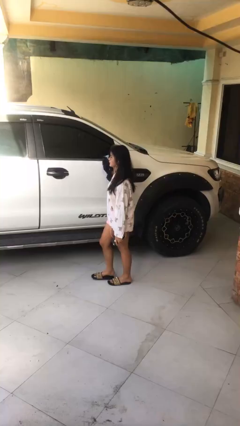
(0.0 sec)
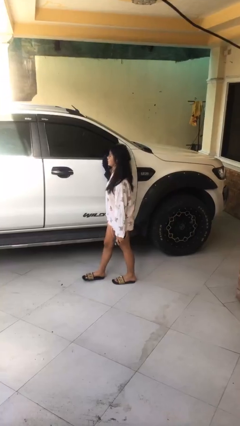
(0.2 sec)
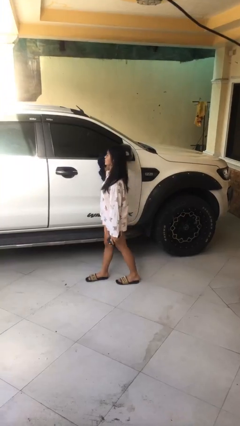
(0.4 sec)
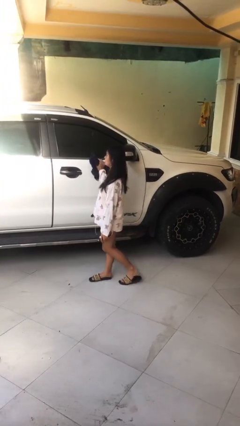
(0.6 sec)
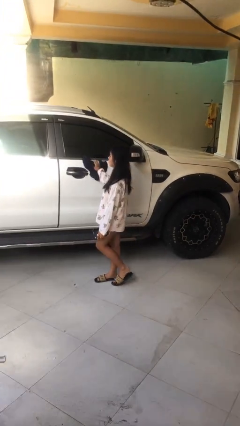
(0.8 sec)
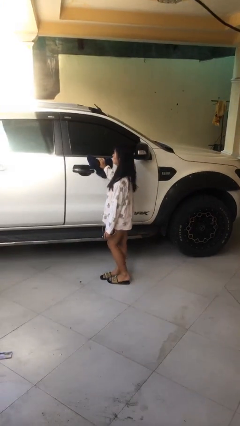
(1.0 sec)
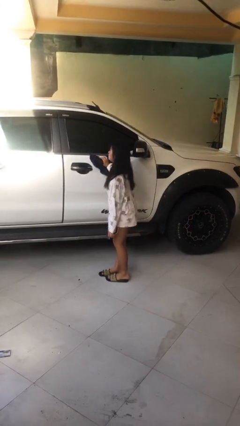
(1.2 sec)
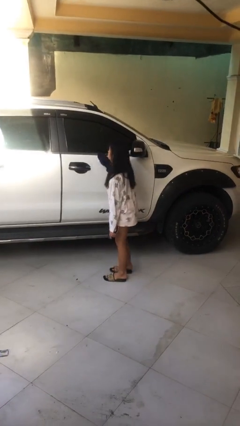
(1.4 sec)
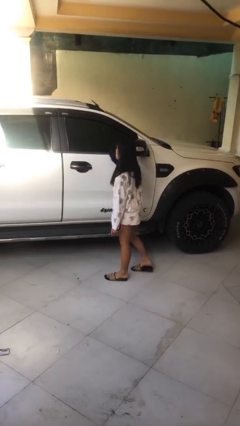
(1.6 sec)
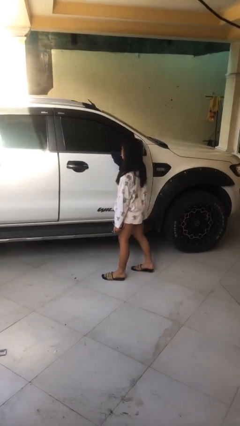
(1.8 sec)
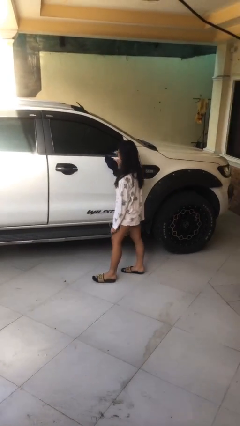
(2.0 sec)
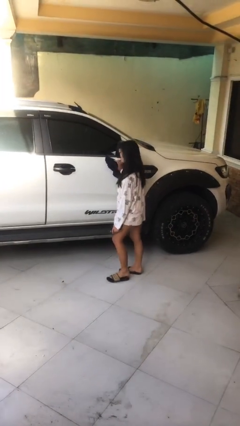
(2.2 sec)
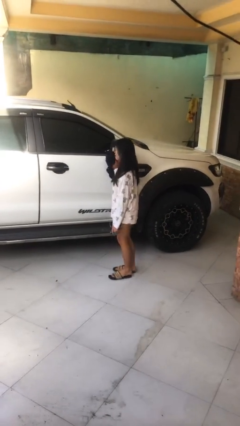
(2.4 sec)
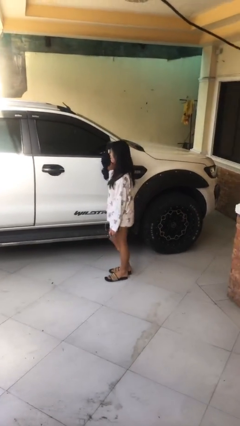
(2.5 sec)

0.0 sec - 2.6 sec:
person polishes car with rag

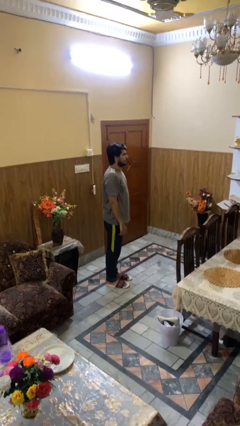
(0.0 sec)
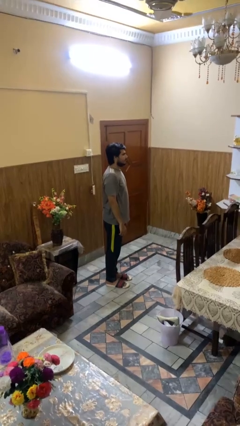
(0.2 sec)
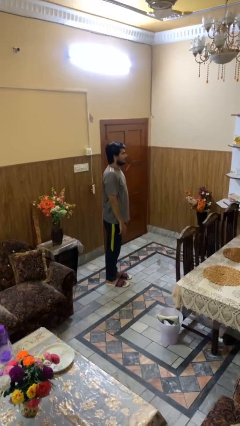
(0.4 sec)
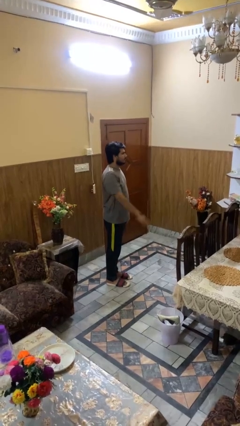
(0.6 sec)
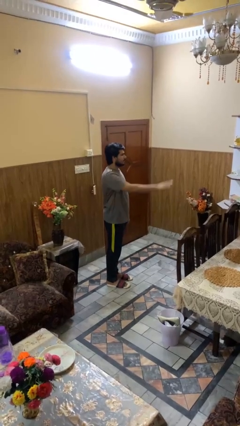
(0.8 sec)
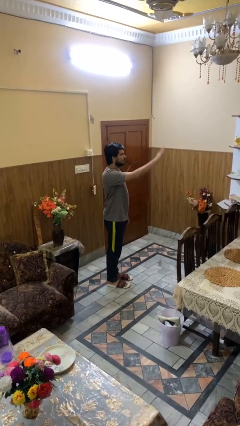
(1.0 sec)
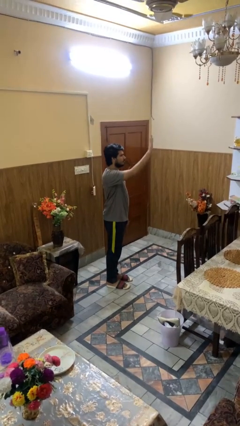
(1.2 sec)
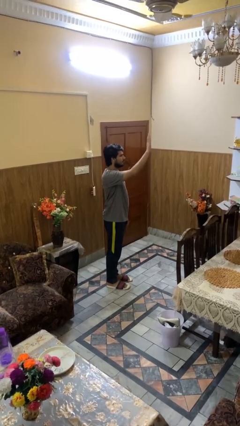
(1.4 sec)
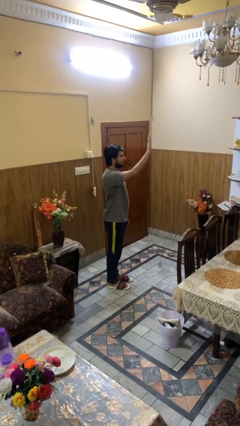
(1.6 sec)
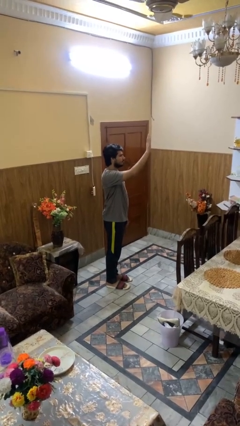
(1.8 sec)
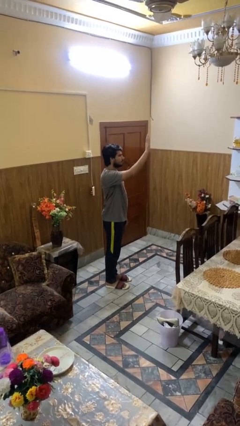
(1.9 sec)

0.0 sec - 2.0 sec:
person gestures raise hand

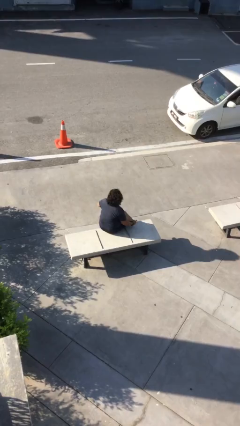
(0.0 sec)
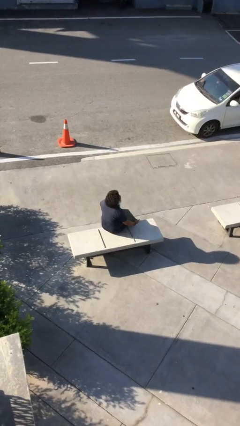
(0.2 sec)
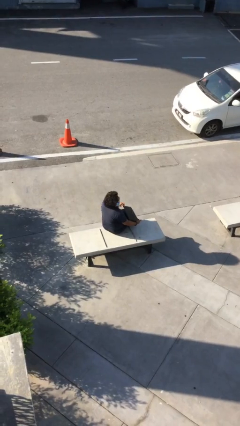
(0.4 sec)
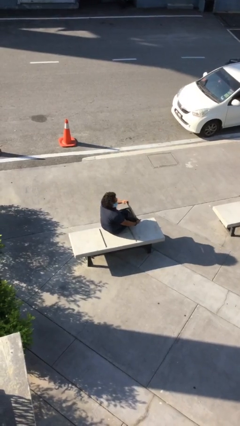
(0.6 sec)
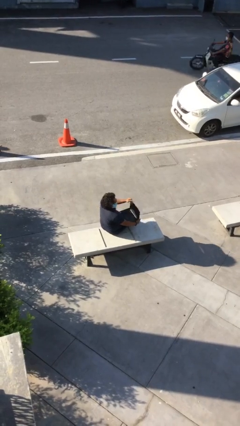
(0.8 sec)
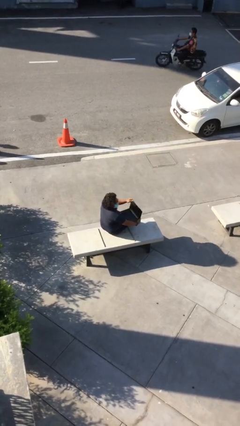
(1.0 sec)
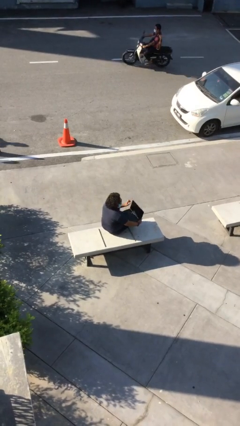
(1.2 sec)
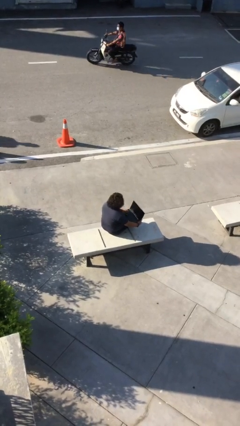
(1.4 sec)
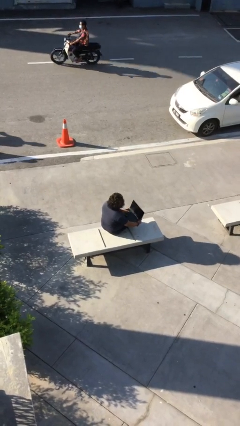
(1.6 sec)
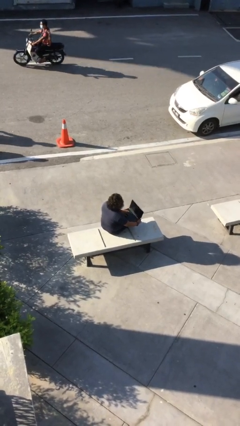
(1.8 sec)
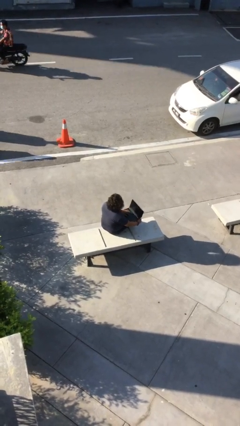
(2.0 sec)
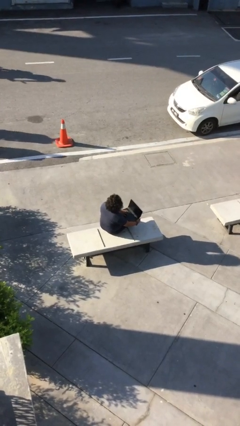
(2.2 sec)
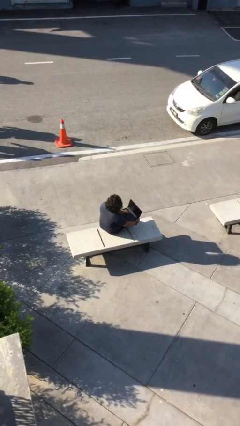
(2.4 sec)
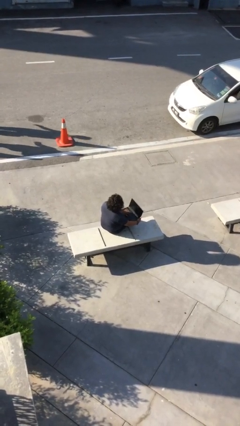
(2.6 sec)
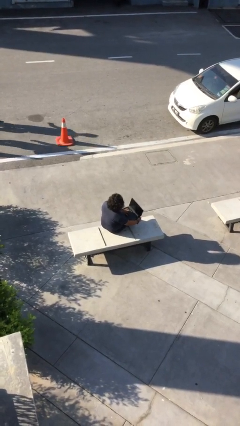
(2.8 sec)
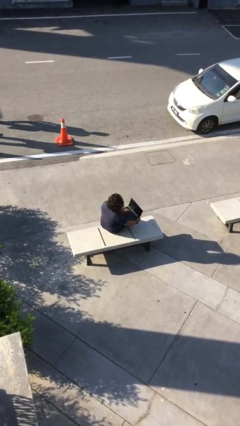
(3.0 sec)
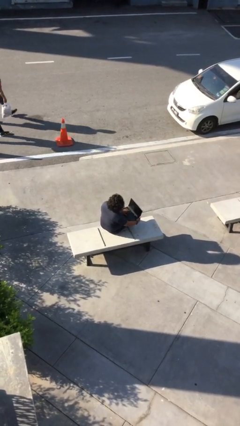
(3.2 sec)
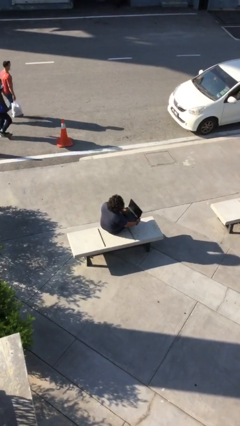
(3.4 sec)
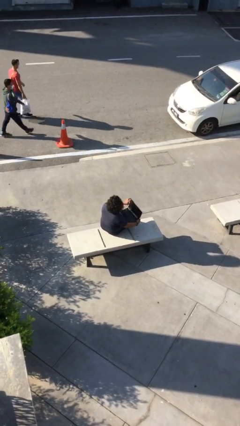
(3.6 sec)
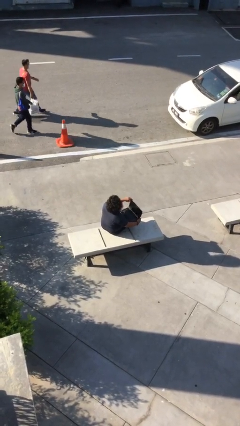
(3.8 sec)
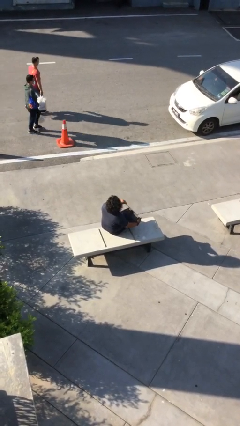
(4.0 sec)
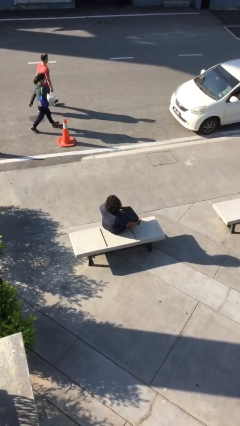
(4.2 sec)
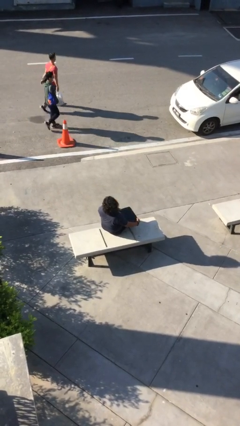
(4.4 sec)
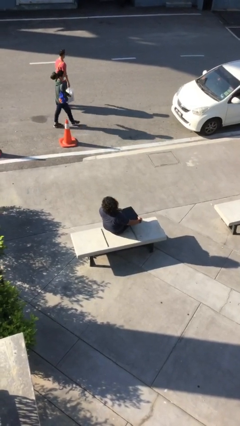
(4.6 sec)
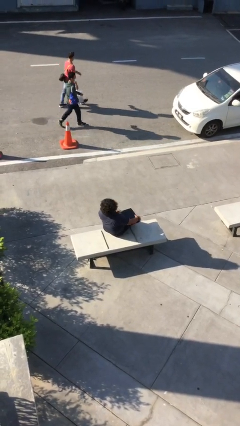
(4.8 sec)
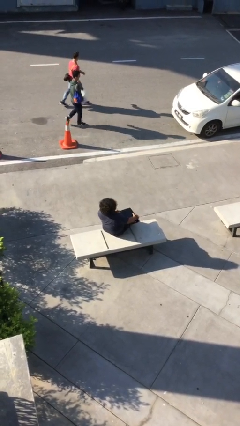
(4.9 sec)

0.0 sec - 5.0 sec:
person interacts with laptop

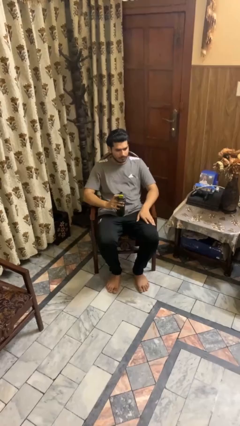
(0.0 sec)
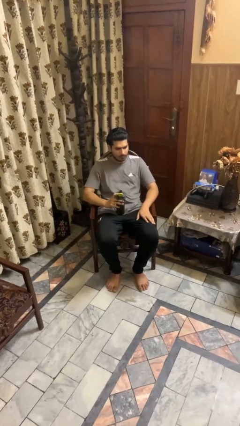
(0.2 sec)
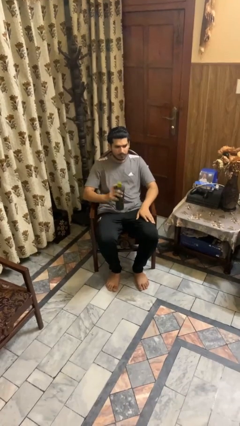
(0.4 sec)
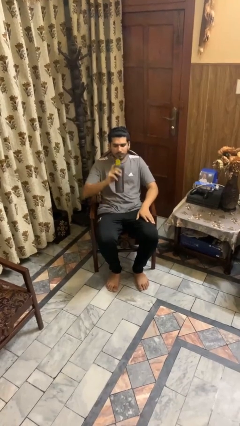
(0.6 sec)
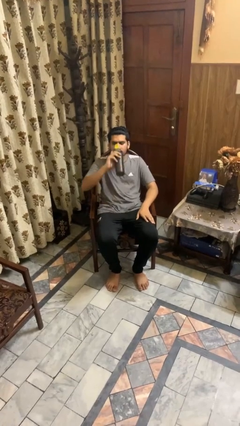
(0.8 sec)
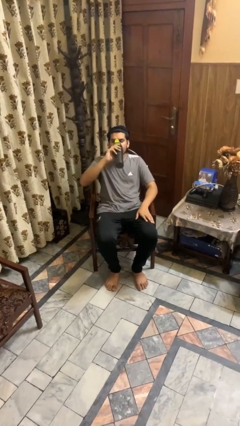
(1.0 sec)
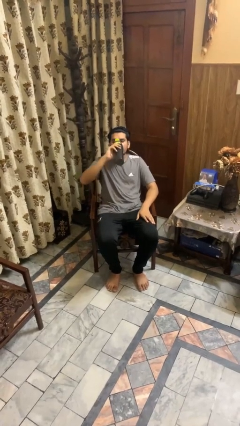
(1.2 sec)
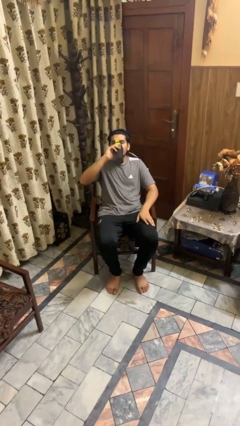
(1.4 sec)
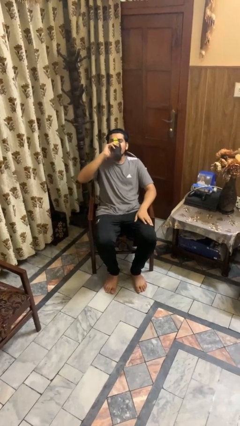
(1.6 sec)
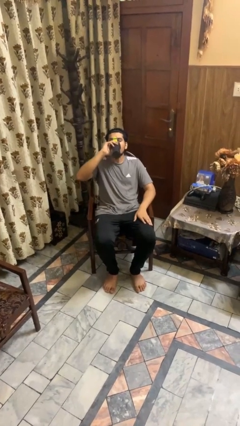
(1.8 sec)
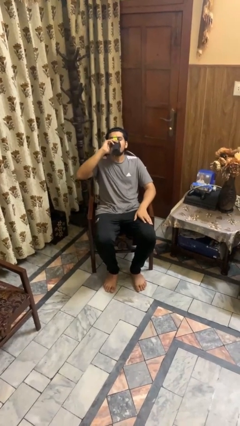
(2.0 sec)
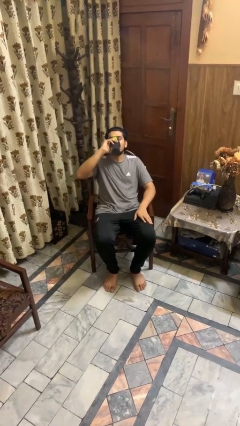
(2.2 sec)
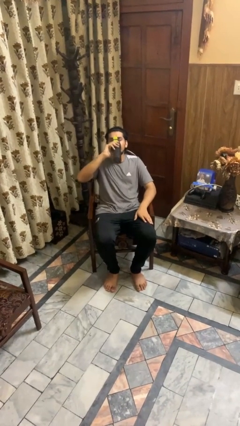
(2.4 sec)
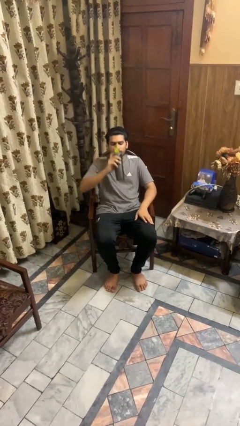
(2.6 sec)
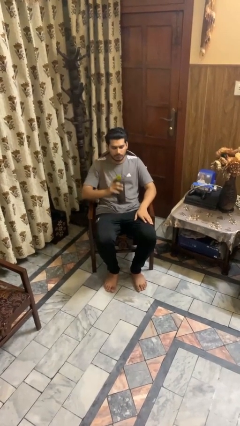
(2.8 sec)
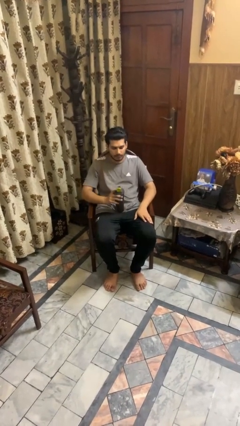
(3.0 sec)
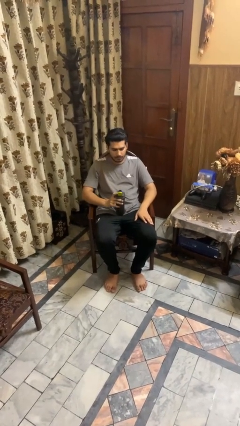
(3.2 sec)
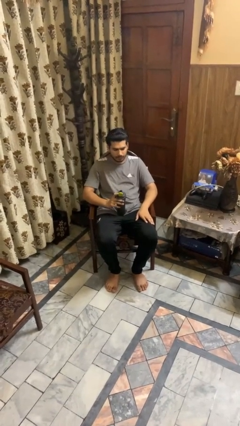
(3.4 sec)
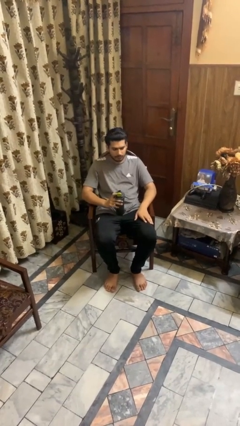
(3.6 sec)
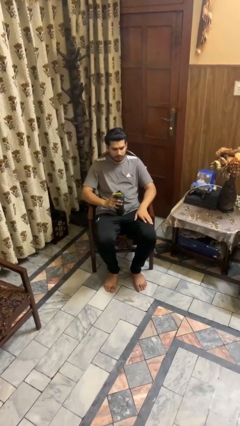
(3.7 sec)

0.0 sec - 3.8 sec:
person drinks from bottle

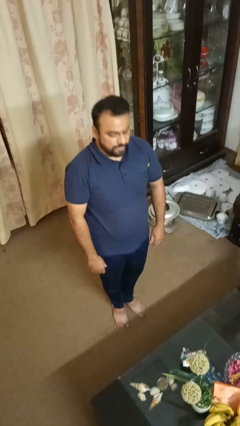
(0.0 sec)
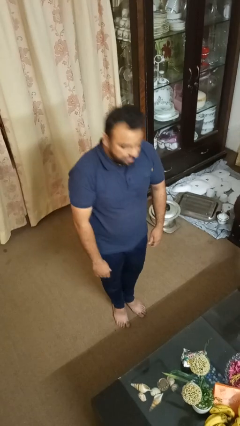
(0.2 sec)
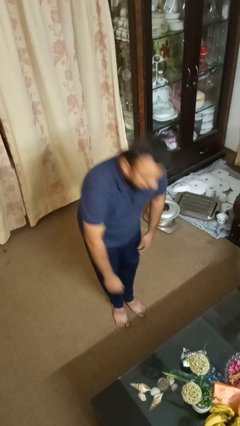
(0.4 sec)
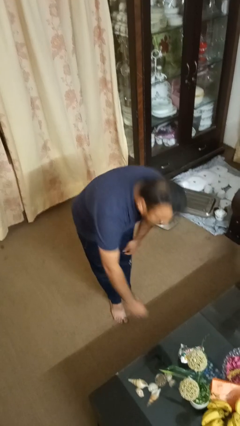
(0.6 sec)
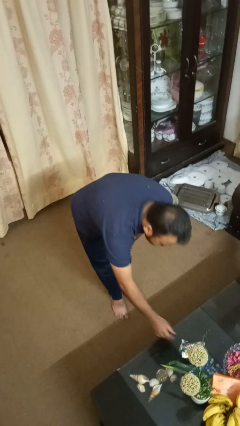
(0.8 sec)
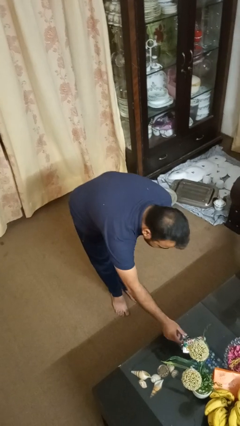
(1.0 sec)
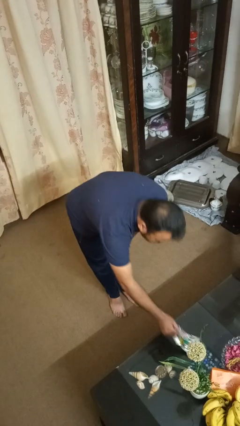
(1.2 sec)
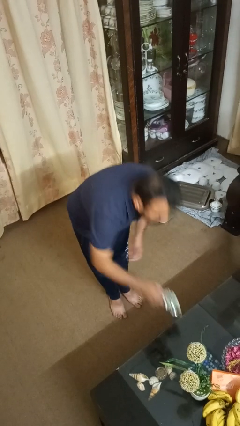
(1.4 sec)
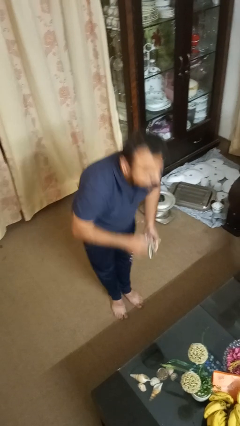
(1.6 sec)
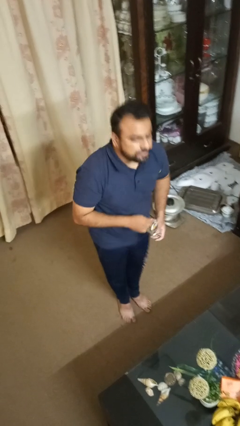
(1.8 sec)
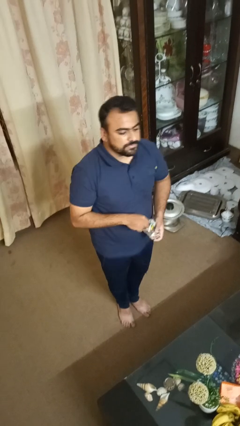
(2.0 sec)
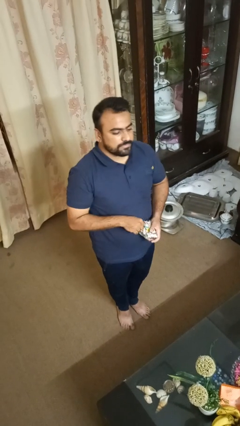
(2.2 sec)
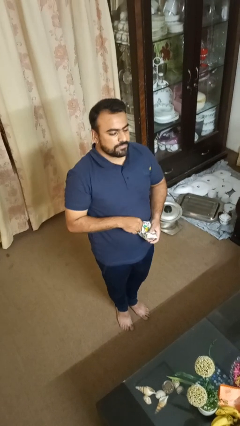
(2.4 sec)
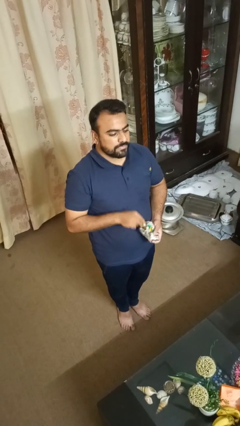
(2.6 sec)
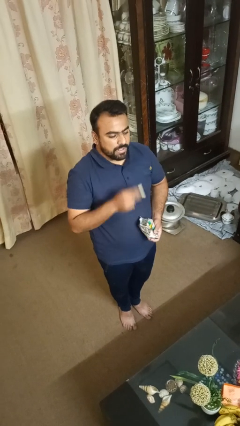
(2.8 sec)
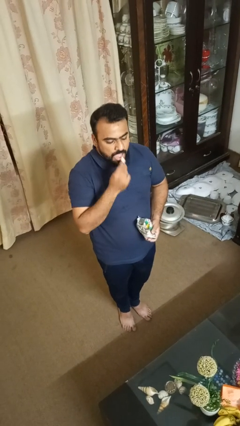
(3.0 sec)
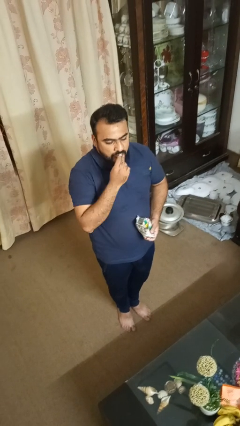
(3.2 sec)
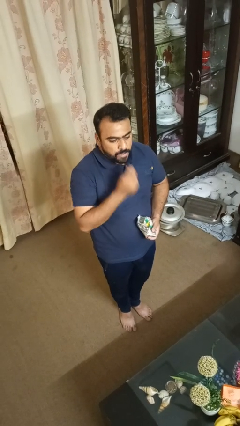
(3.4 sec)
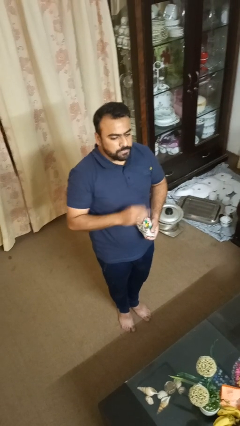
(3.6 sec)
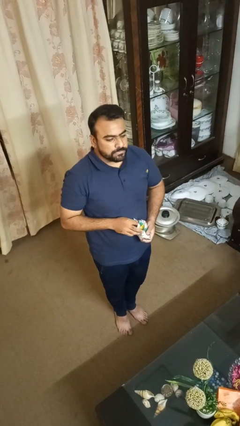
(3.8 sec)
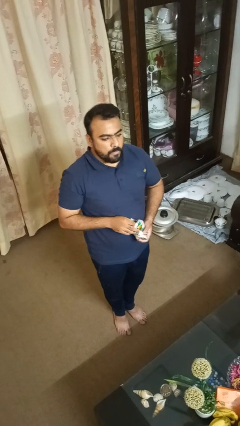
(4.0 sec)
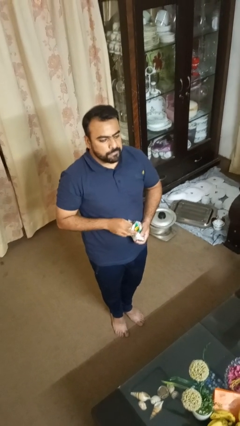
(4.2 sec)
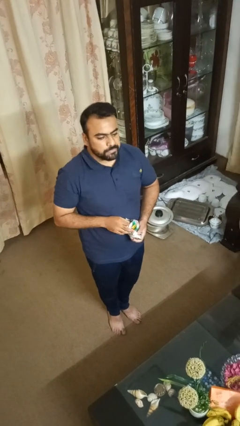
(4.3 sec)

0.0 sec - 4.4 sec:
person eats snack from bag
